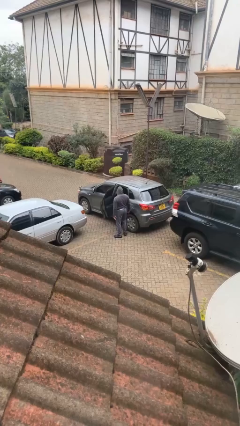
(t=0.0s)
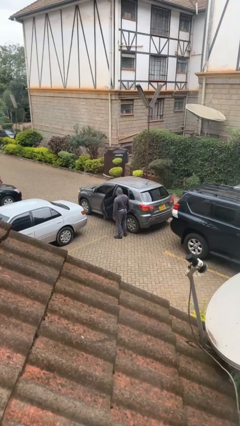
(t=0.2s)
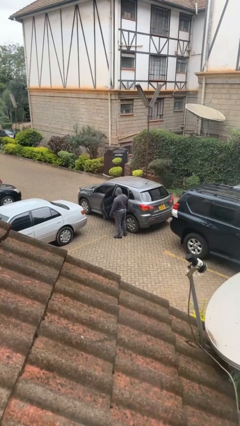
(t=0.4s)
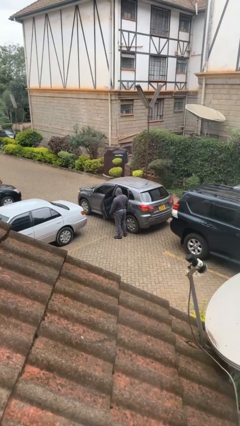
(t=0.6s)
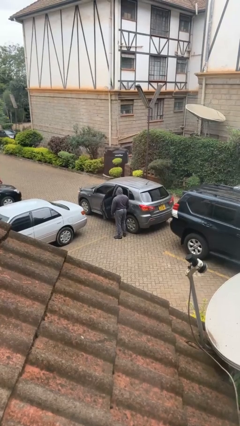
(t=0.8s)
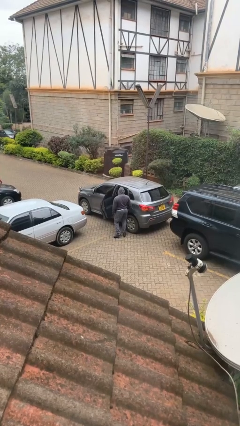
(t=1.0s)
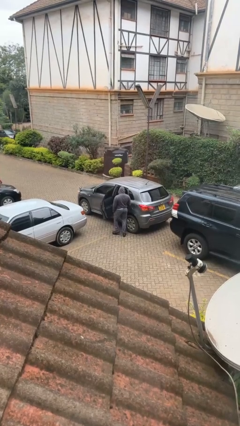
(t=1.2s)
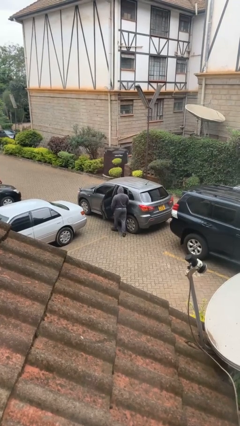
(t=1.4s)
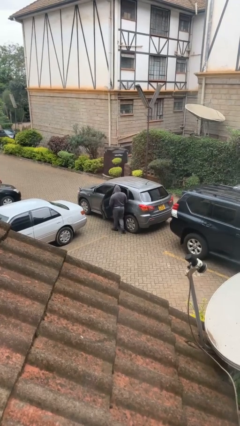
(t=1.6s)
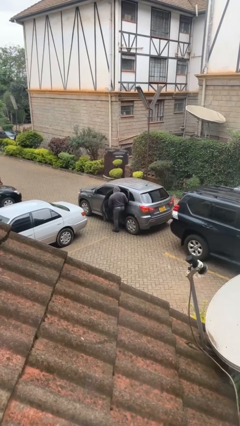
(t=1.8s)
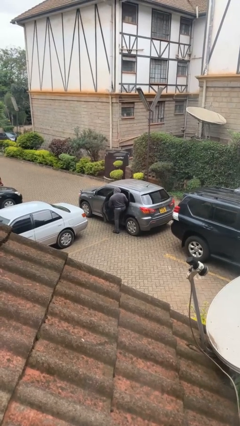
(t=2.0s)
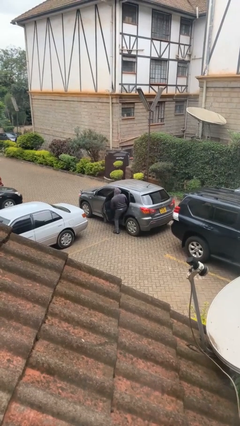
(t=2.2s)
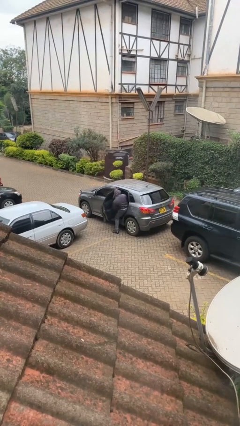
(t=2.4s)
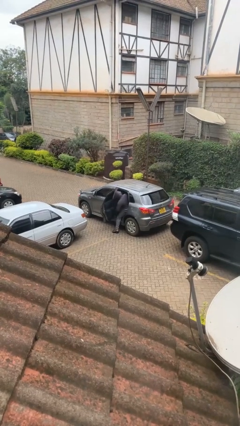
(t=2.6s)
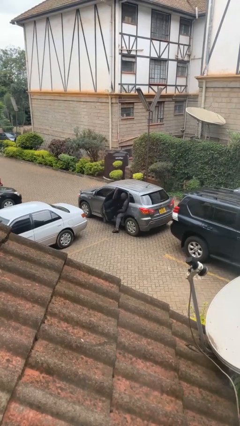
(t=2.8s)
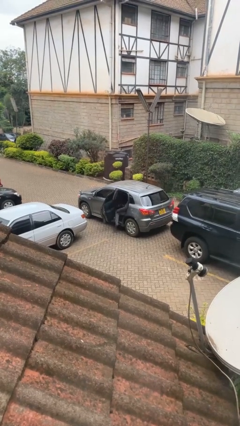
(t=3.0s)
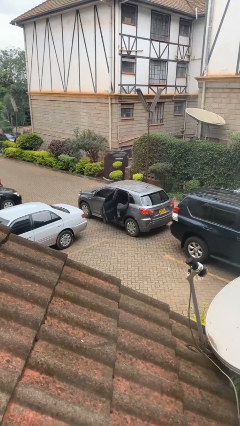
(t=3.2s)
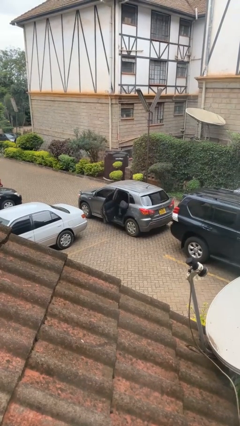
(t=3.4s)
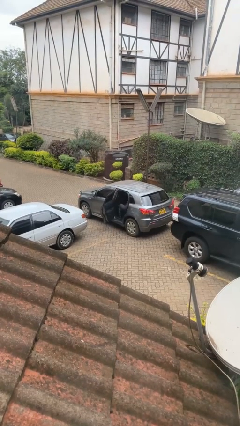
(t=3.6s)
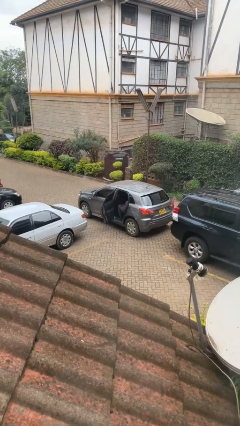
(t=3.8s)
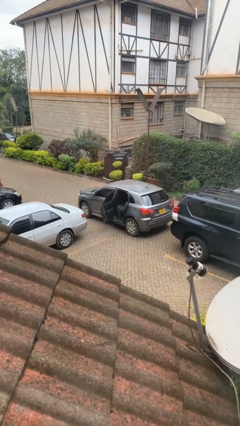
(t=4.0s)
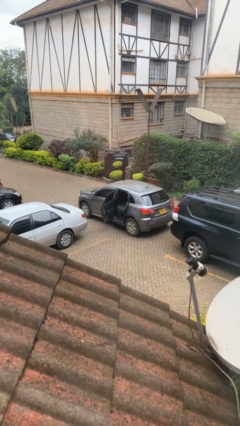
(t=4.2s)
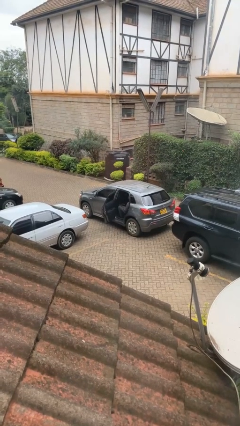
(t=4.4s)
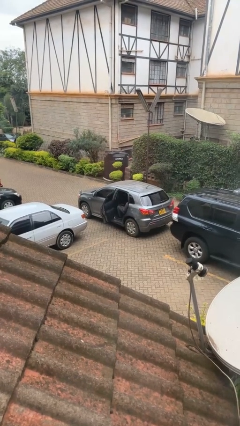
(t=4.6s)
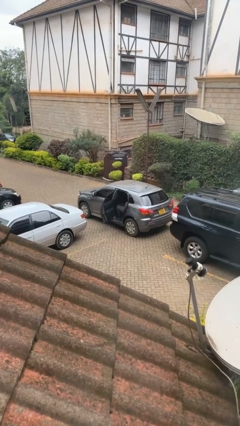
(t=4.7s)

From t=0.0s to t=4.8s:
person enters car

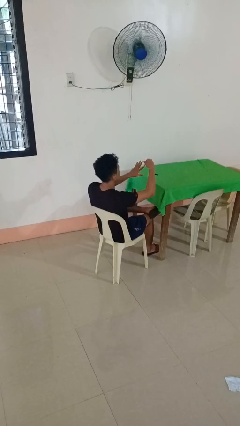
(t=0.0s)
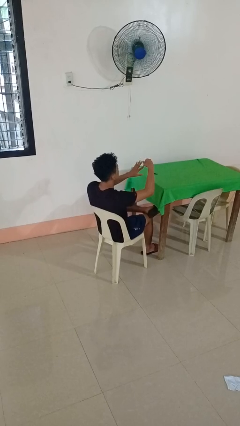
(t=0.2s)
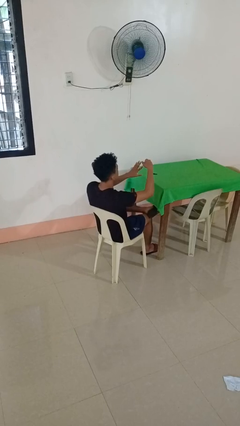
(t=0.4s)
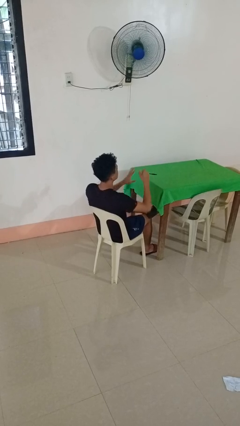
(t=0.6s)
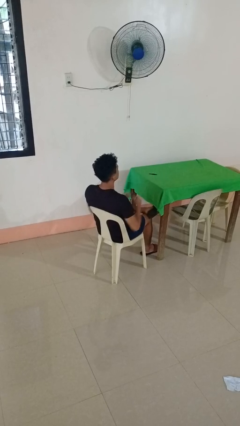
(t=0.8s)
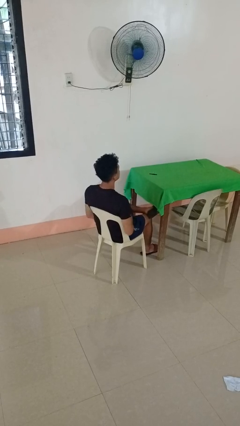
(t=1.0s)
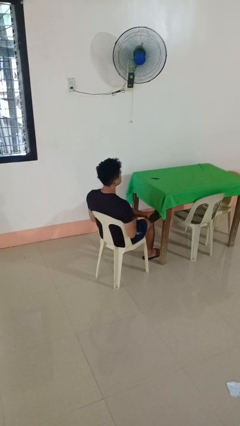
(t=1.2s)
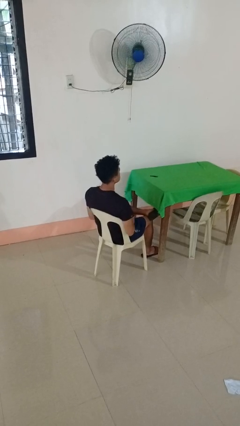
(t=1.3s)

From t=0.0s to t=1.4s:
person clips fingernails

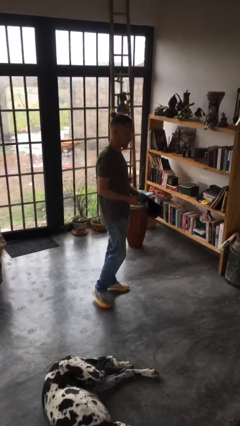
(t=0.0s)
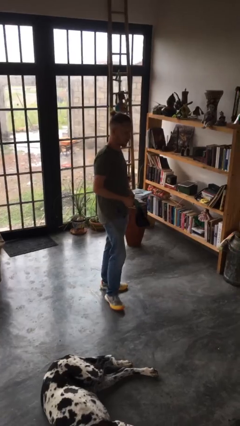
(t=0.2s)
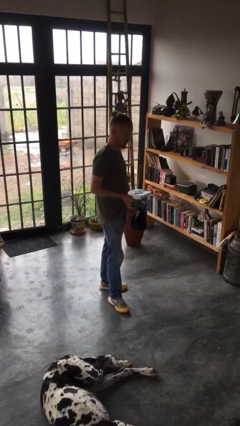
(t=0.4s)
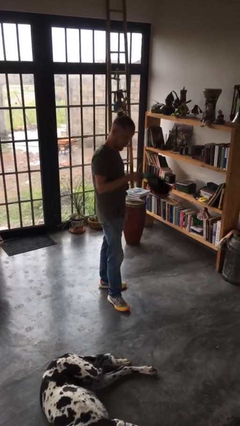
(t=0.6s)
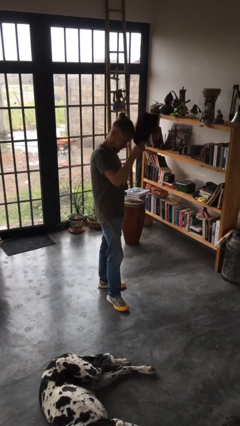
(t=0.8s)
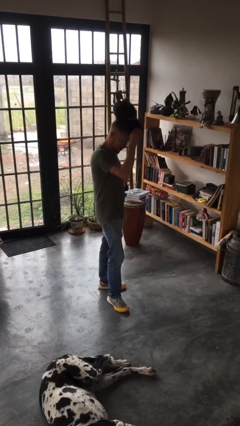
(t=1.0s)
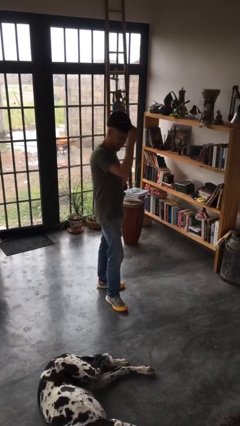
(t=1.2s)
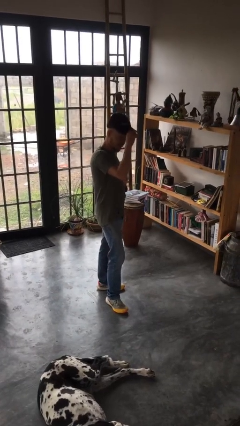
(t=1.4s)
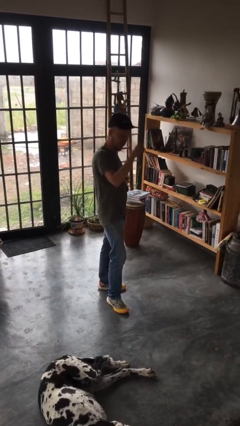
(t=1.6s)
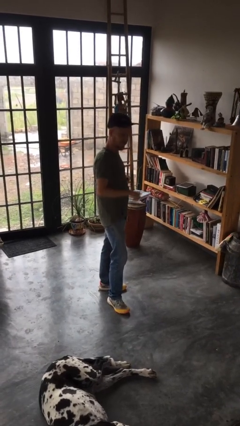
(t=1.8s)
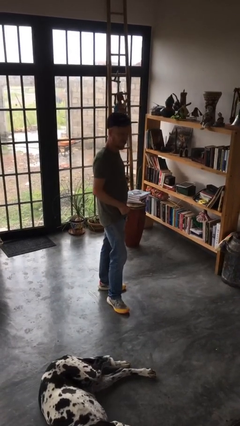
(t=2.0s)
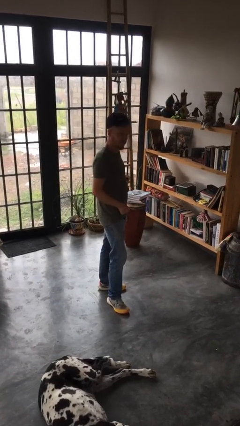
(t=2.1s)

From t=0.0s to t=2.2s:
person puts on hat

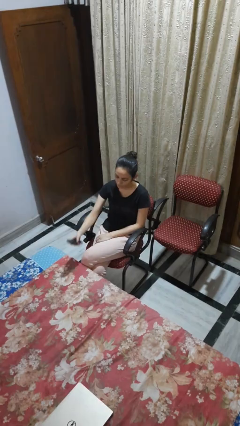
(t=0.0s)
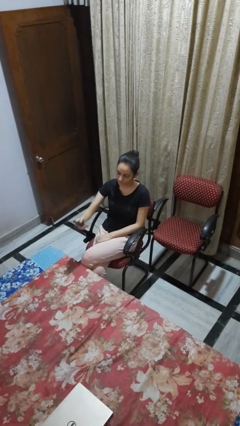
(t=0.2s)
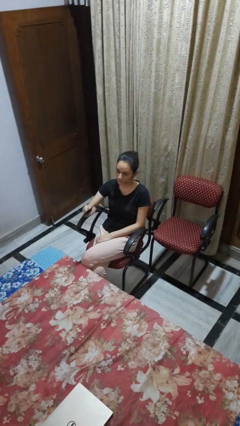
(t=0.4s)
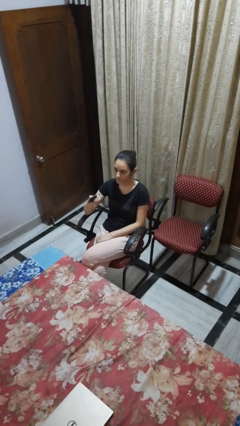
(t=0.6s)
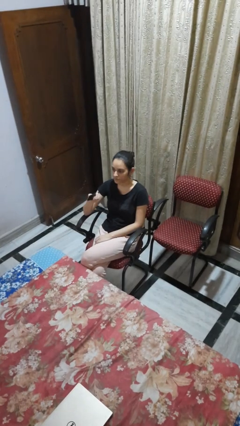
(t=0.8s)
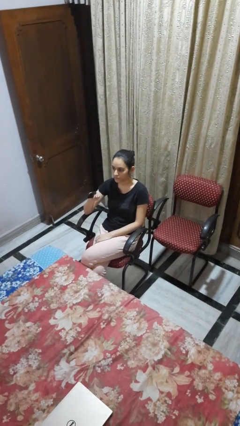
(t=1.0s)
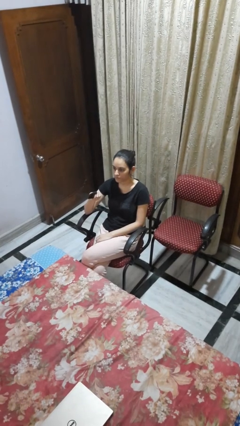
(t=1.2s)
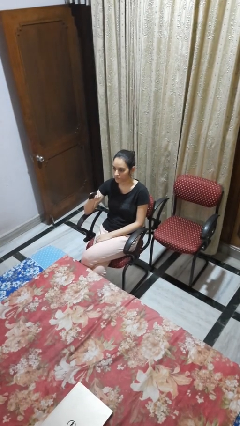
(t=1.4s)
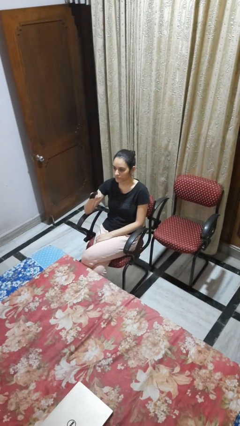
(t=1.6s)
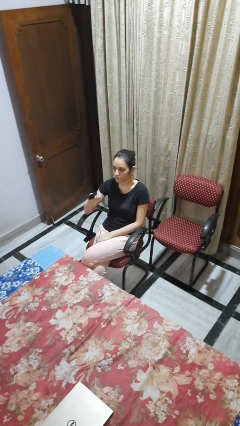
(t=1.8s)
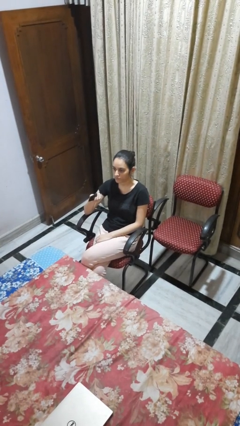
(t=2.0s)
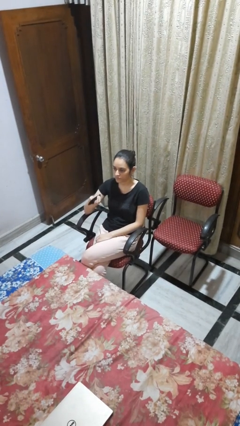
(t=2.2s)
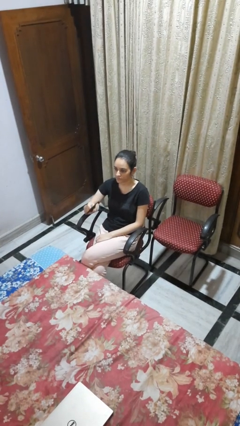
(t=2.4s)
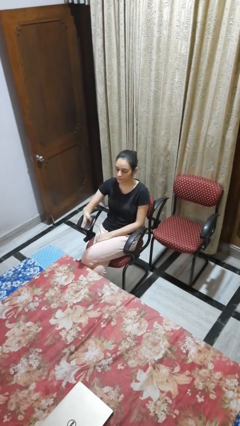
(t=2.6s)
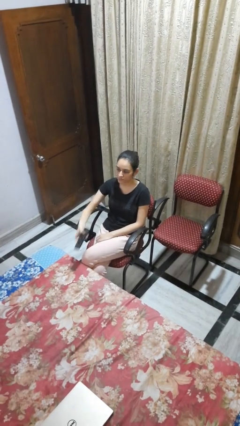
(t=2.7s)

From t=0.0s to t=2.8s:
person uses television remote

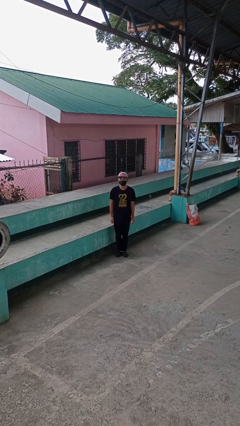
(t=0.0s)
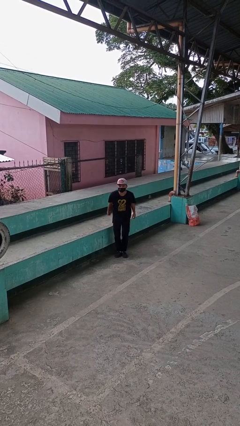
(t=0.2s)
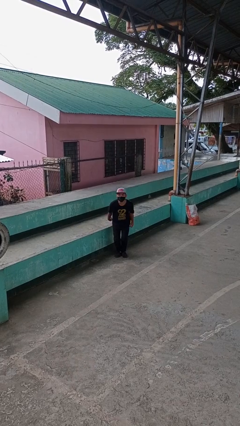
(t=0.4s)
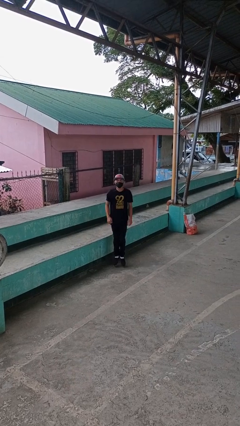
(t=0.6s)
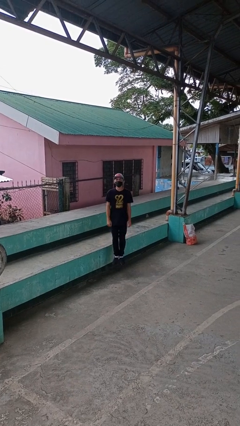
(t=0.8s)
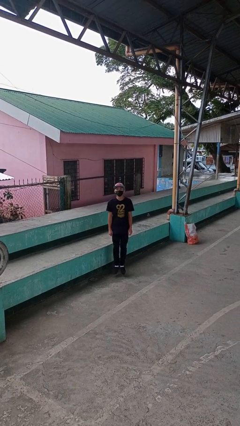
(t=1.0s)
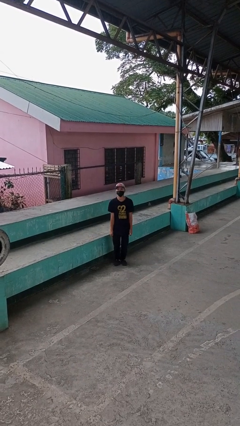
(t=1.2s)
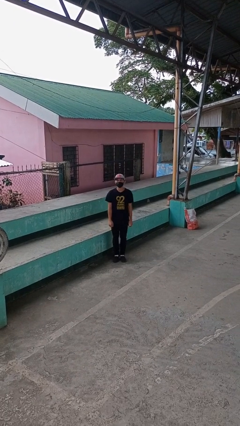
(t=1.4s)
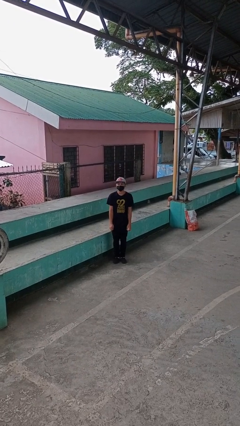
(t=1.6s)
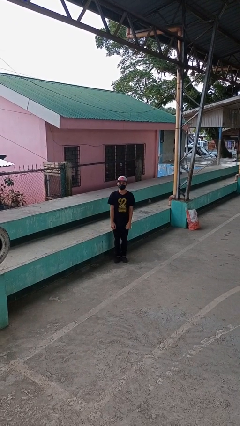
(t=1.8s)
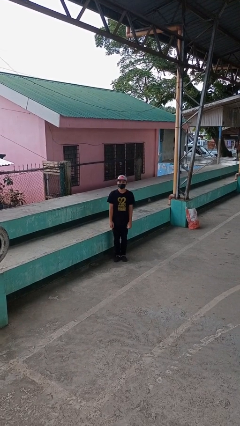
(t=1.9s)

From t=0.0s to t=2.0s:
person jumps

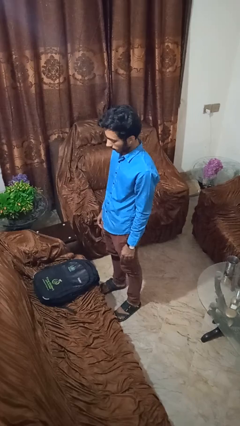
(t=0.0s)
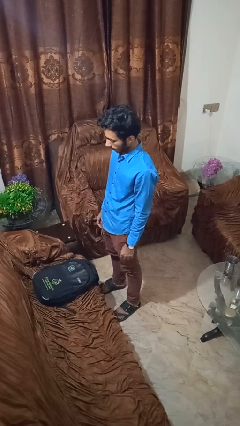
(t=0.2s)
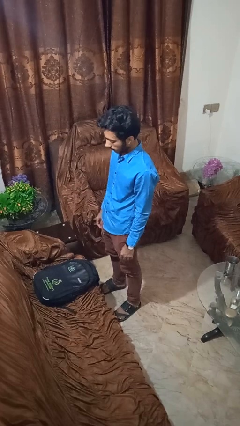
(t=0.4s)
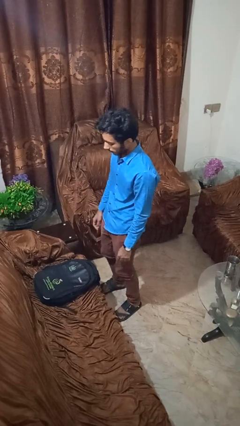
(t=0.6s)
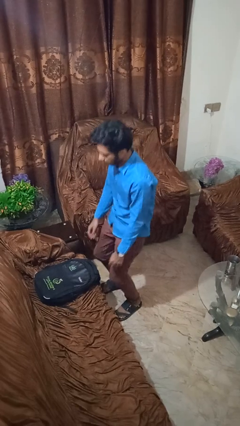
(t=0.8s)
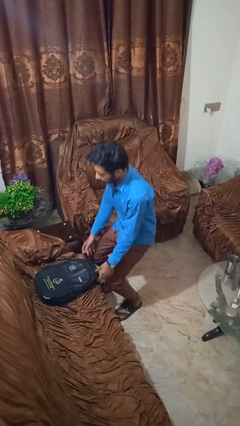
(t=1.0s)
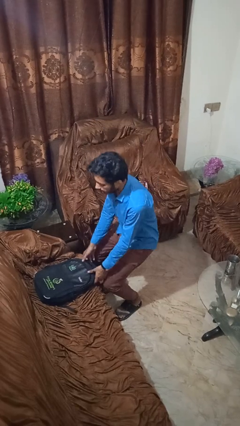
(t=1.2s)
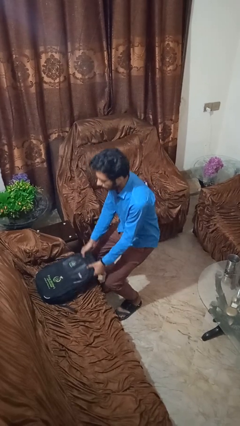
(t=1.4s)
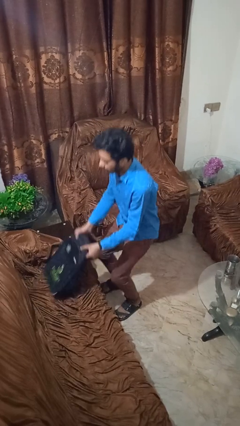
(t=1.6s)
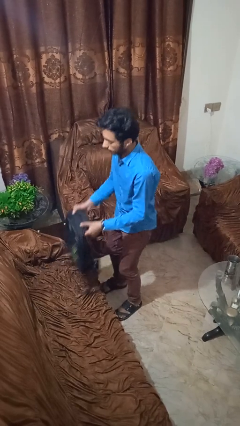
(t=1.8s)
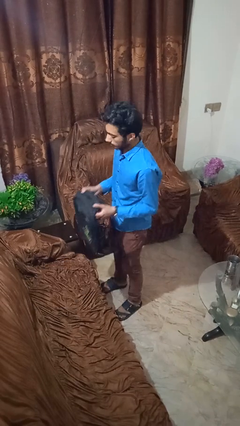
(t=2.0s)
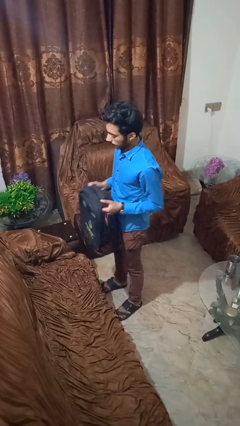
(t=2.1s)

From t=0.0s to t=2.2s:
person picks up object from couch

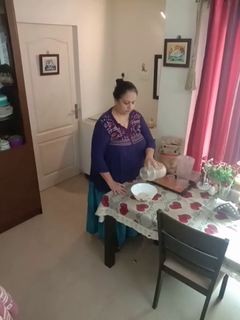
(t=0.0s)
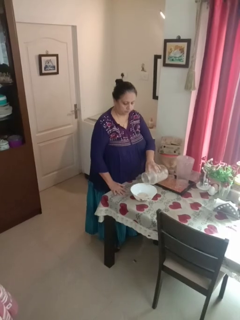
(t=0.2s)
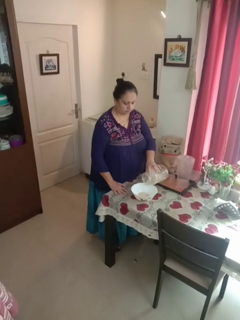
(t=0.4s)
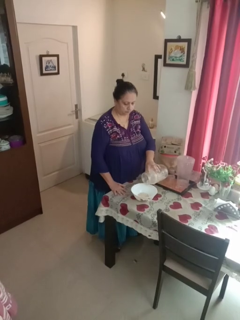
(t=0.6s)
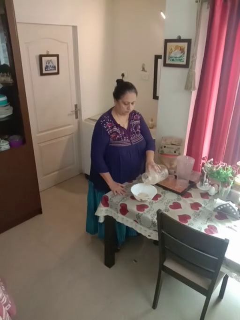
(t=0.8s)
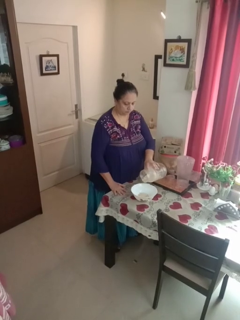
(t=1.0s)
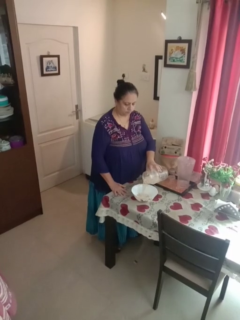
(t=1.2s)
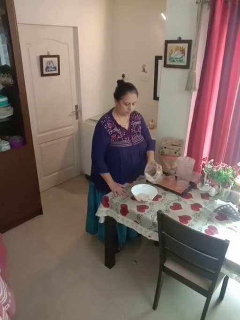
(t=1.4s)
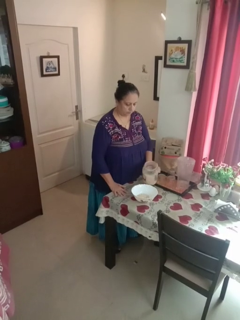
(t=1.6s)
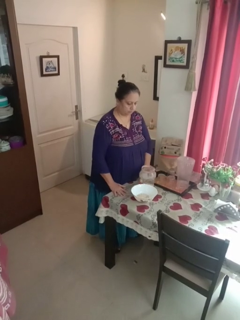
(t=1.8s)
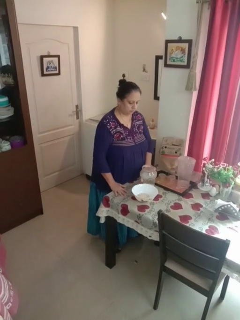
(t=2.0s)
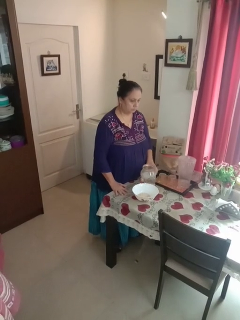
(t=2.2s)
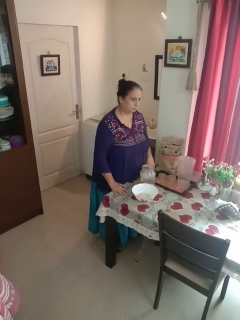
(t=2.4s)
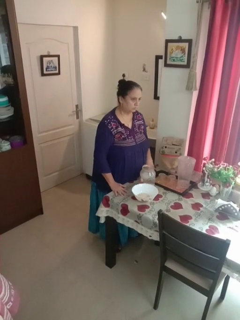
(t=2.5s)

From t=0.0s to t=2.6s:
person pours into bowl
